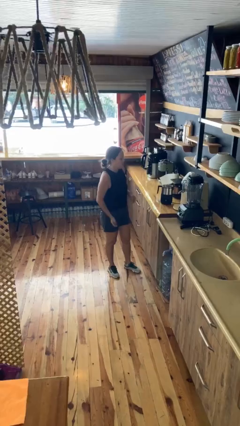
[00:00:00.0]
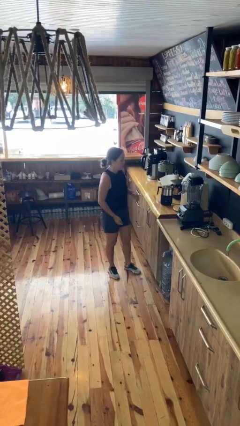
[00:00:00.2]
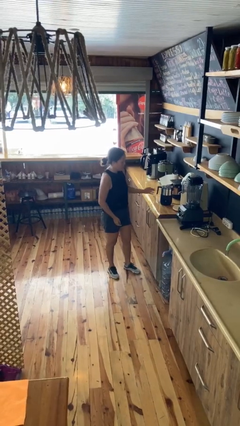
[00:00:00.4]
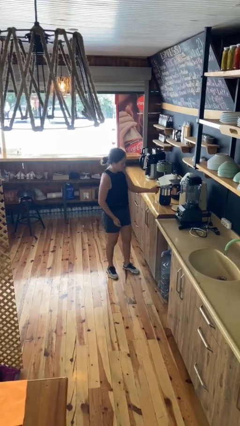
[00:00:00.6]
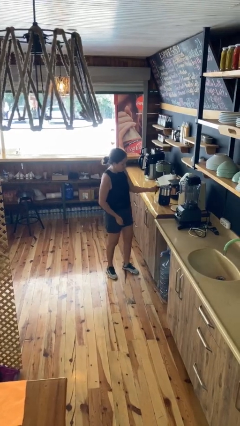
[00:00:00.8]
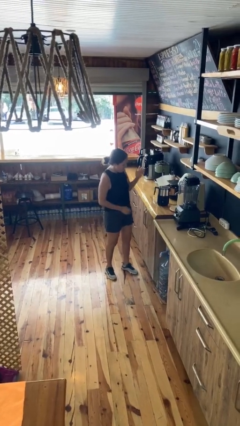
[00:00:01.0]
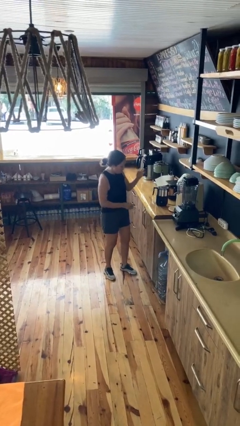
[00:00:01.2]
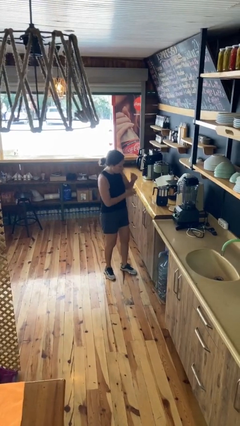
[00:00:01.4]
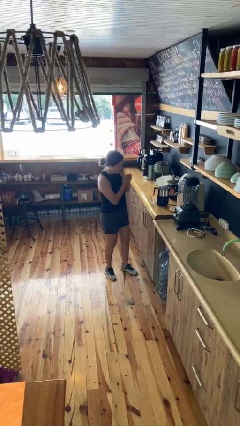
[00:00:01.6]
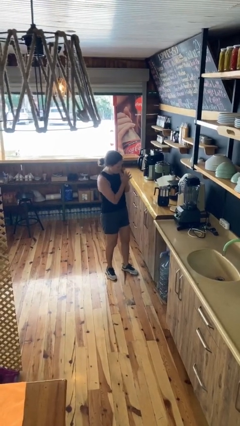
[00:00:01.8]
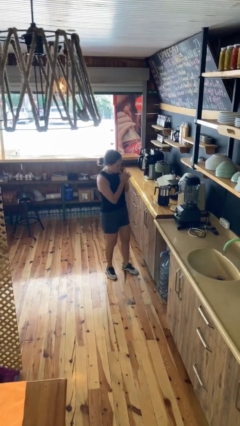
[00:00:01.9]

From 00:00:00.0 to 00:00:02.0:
person burns hand

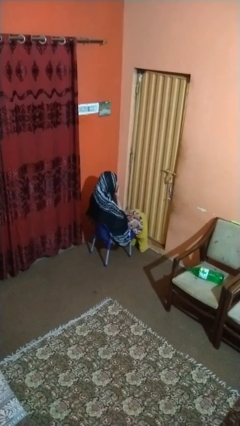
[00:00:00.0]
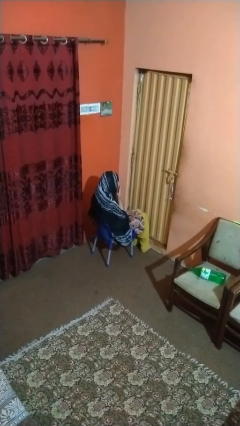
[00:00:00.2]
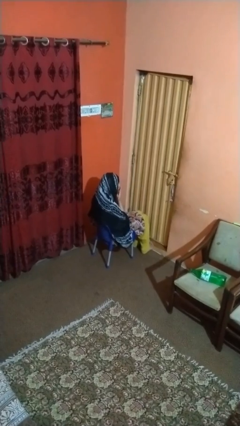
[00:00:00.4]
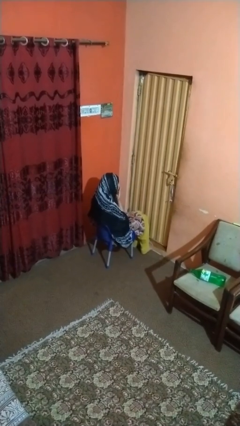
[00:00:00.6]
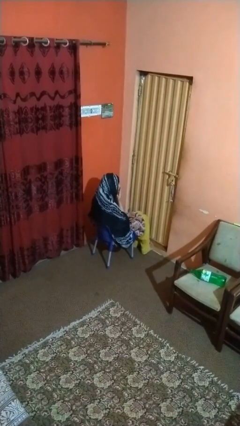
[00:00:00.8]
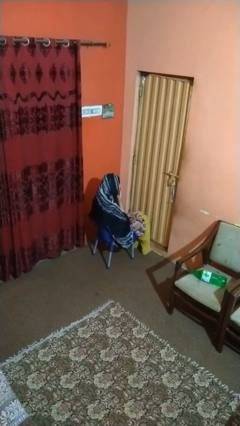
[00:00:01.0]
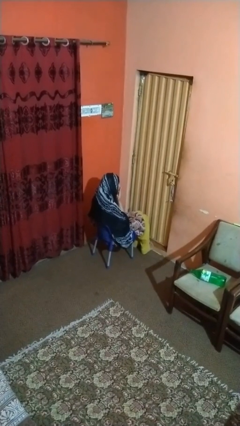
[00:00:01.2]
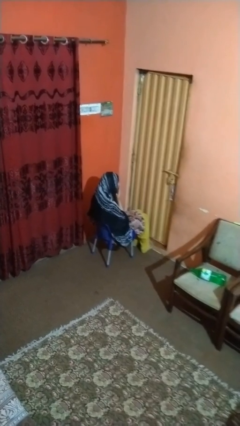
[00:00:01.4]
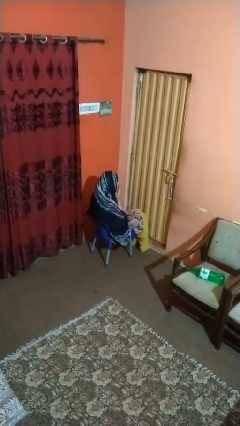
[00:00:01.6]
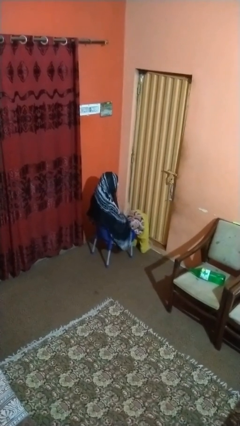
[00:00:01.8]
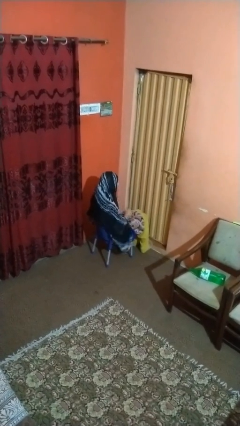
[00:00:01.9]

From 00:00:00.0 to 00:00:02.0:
person yawns

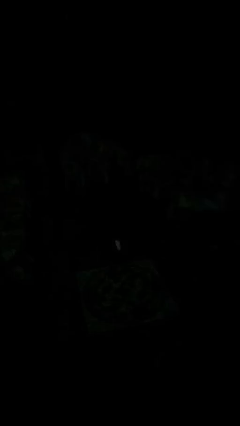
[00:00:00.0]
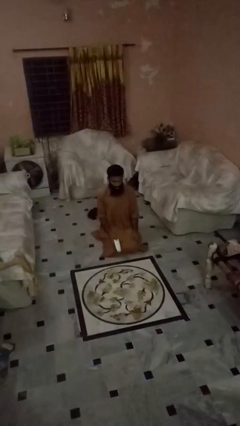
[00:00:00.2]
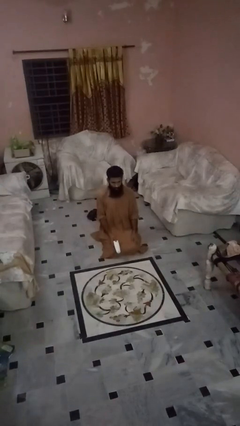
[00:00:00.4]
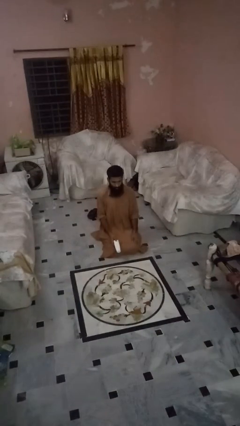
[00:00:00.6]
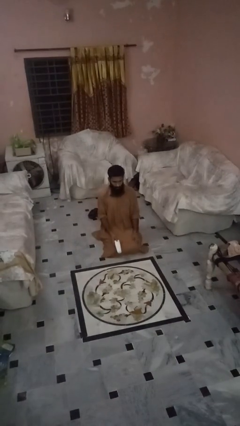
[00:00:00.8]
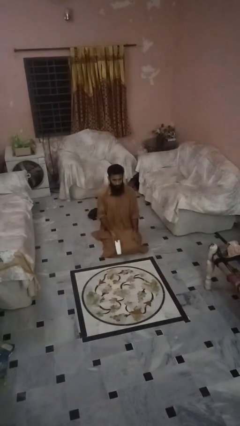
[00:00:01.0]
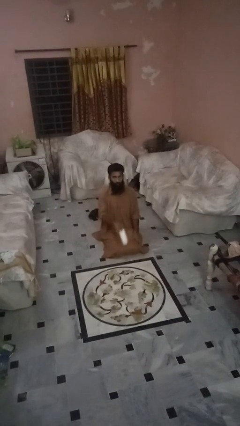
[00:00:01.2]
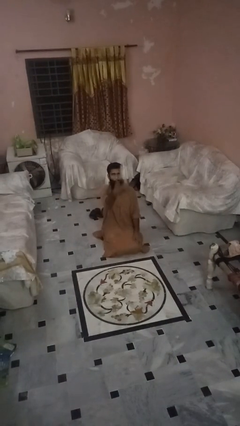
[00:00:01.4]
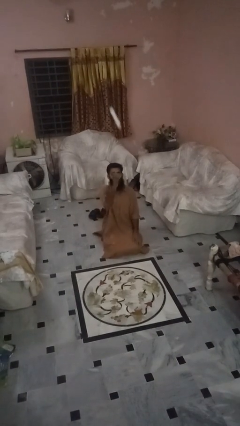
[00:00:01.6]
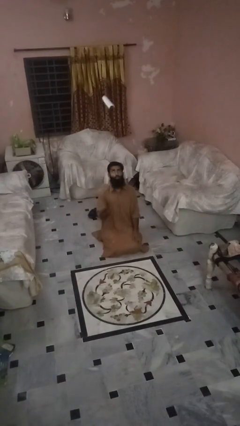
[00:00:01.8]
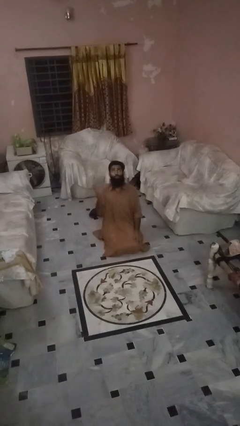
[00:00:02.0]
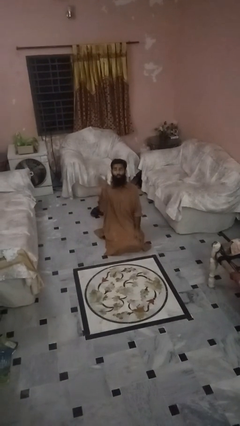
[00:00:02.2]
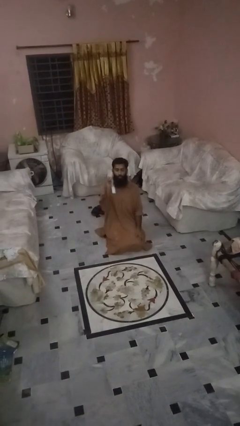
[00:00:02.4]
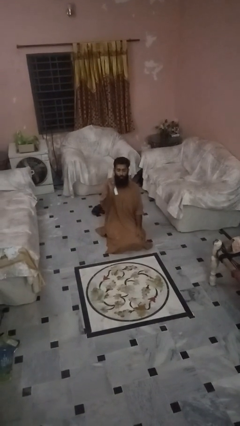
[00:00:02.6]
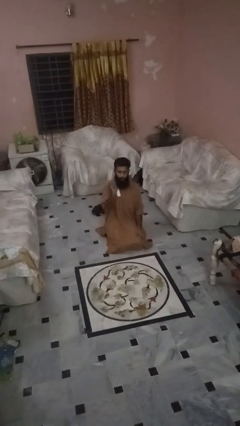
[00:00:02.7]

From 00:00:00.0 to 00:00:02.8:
person drops object

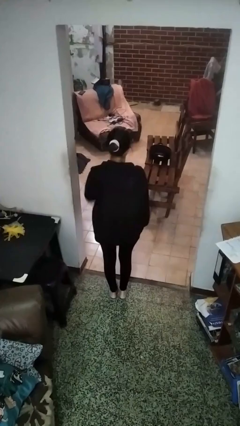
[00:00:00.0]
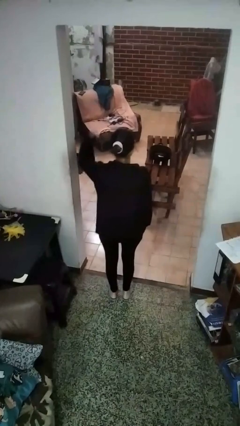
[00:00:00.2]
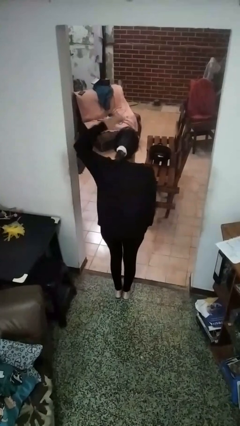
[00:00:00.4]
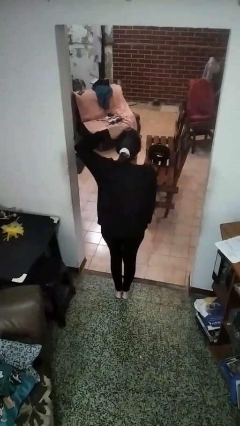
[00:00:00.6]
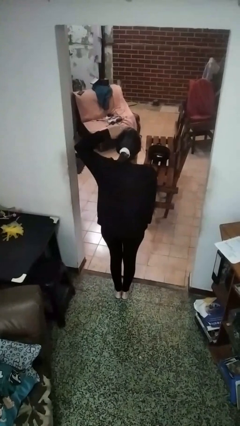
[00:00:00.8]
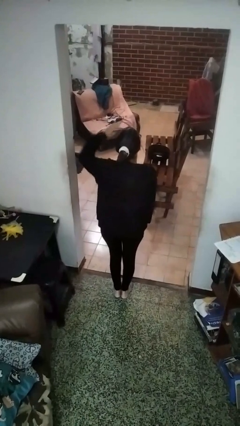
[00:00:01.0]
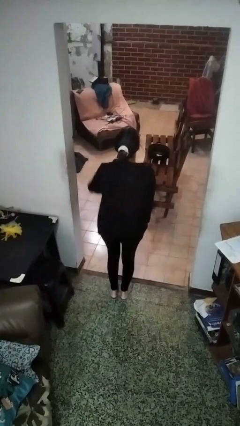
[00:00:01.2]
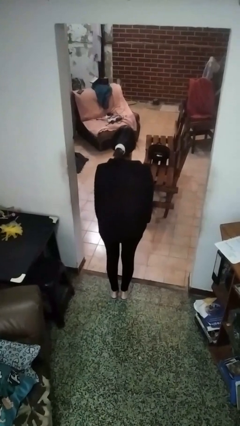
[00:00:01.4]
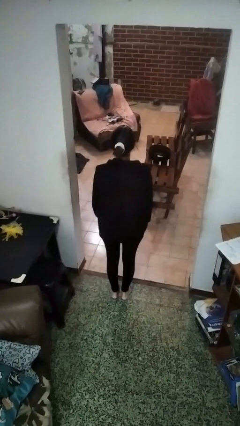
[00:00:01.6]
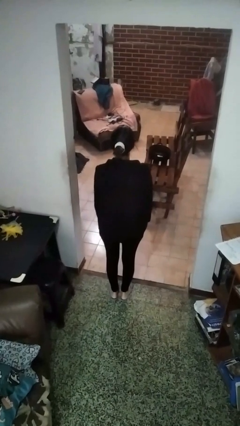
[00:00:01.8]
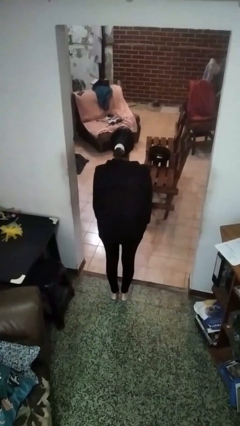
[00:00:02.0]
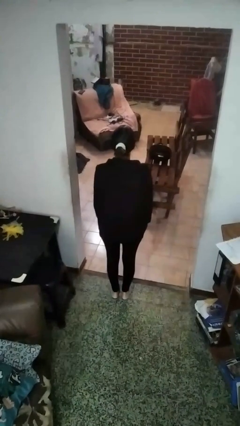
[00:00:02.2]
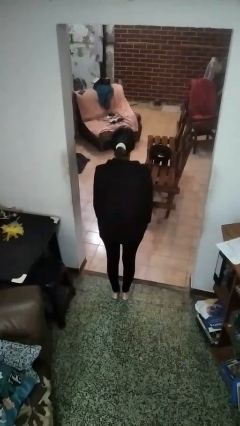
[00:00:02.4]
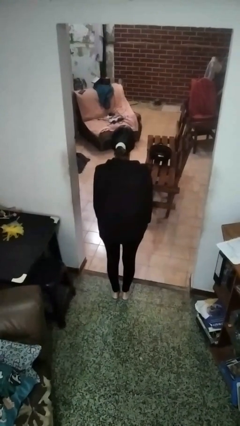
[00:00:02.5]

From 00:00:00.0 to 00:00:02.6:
person salutes

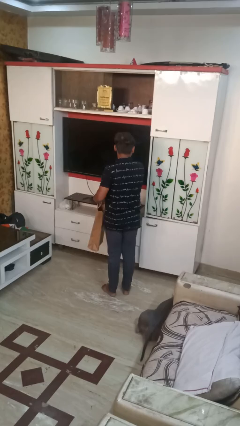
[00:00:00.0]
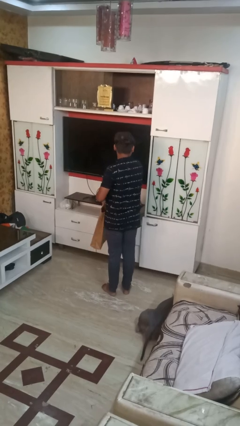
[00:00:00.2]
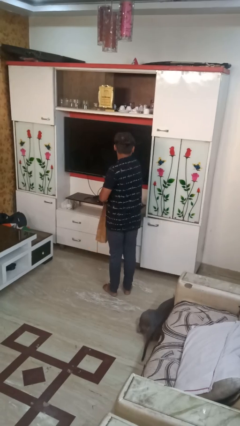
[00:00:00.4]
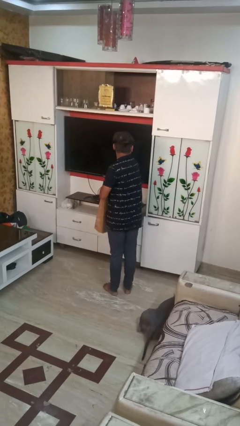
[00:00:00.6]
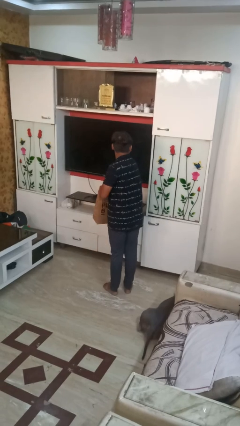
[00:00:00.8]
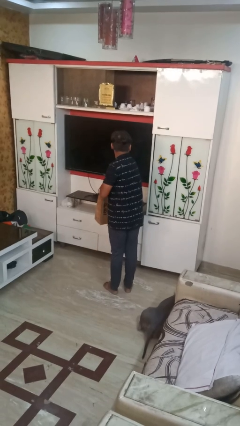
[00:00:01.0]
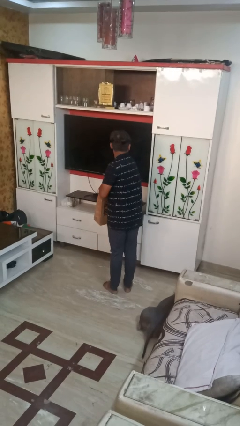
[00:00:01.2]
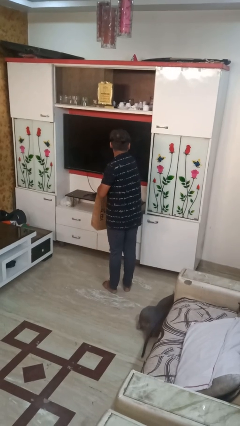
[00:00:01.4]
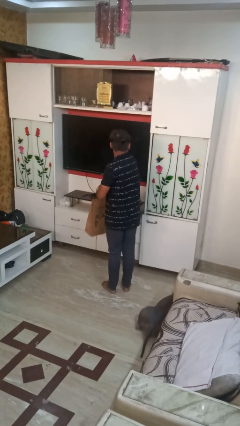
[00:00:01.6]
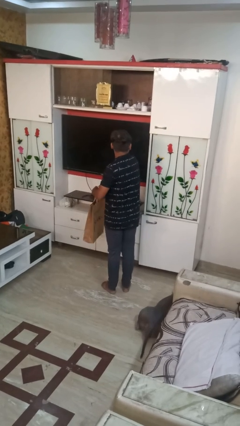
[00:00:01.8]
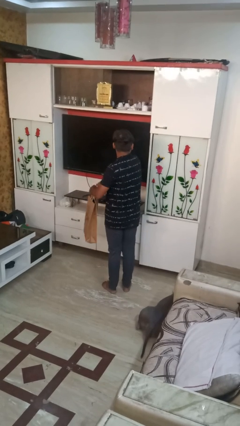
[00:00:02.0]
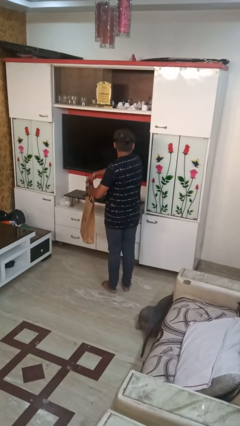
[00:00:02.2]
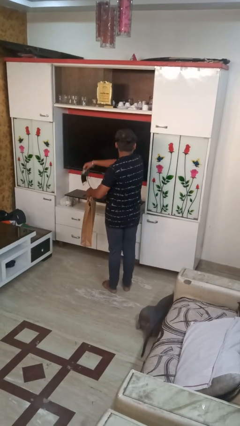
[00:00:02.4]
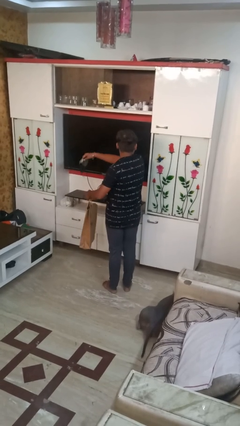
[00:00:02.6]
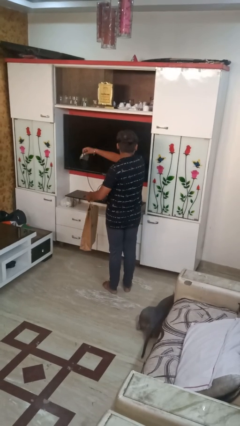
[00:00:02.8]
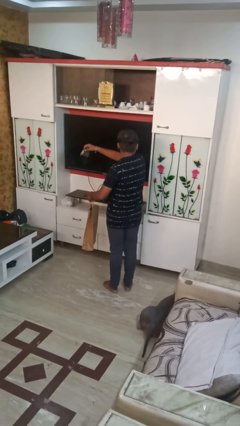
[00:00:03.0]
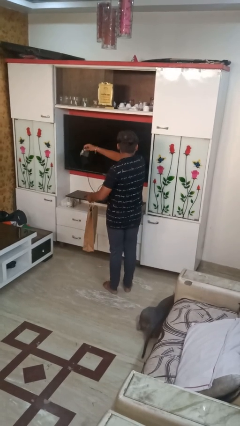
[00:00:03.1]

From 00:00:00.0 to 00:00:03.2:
person takes object from bag

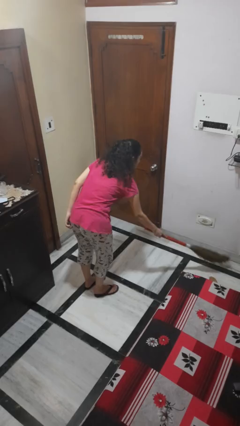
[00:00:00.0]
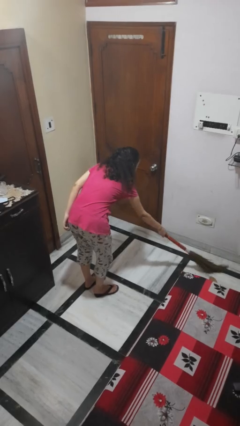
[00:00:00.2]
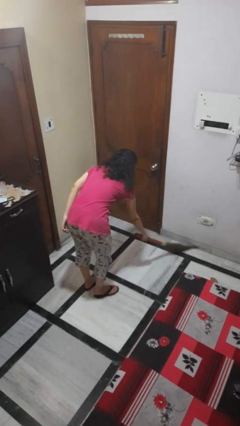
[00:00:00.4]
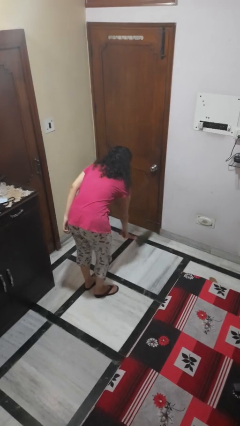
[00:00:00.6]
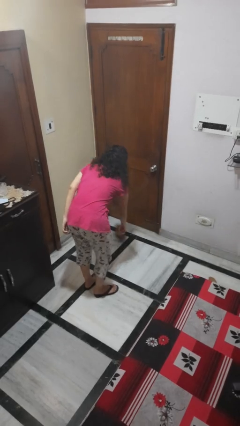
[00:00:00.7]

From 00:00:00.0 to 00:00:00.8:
person sweeps floor

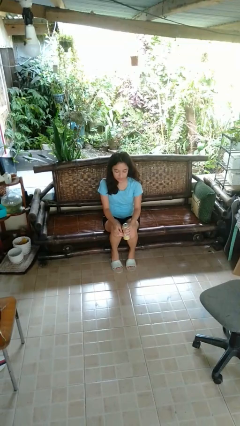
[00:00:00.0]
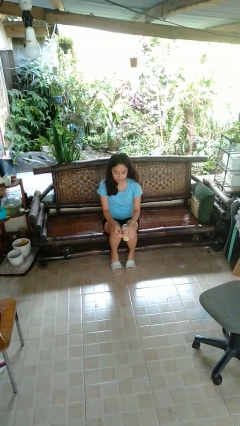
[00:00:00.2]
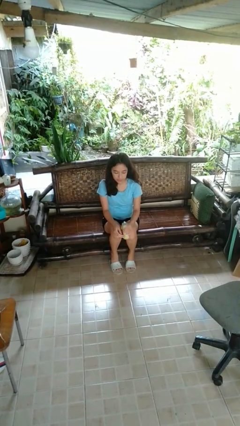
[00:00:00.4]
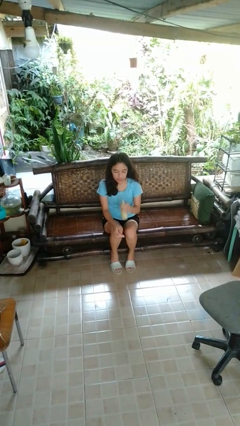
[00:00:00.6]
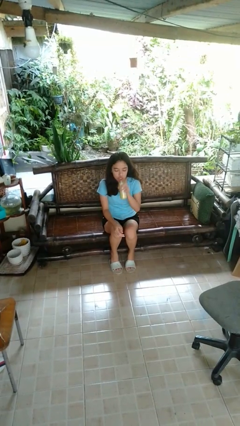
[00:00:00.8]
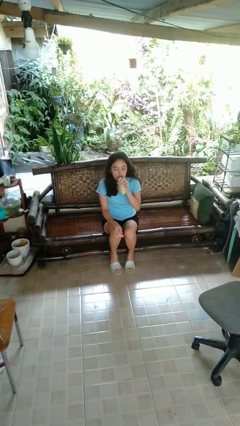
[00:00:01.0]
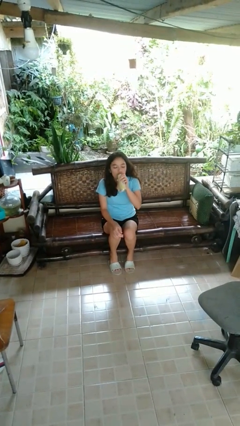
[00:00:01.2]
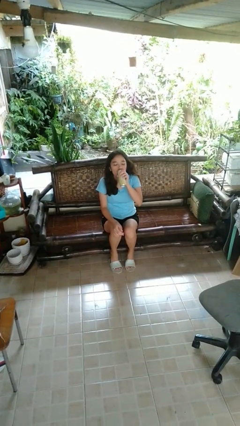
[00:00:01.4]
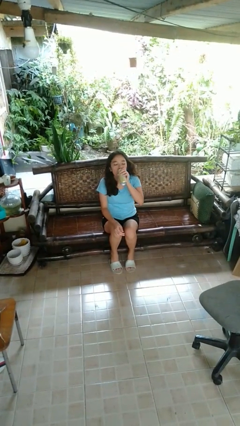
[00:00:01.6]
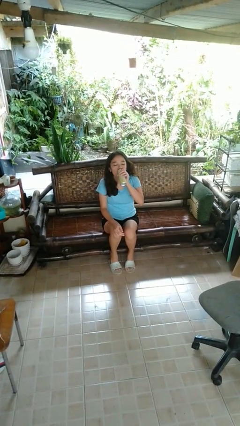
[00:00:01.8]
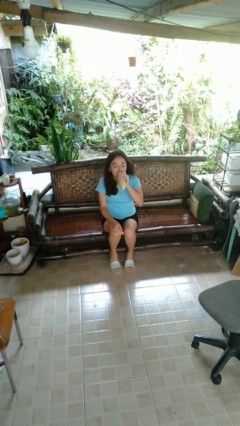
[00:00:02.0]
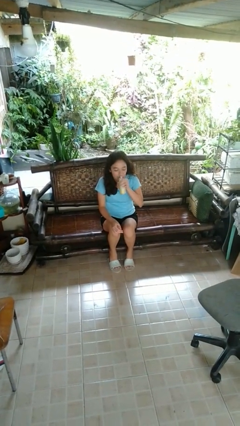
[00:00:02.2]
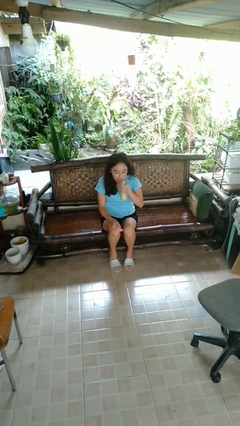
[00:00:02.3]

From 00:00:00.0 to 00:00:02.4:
person drinks from beverage can

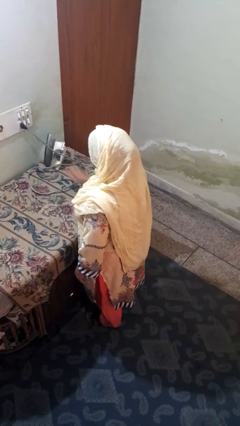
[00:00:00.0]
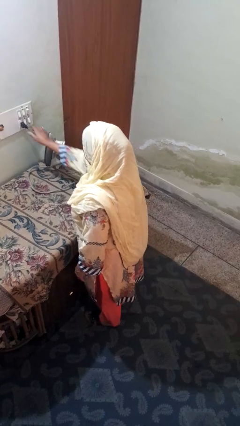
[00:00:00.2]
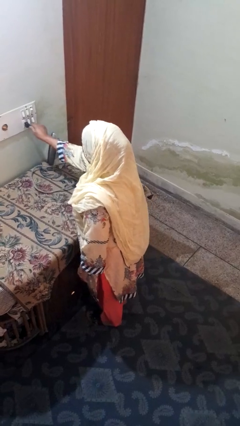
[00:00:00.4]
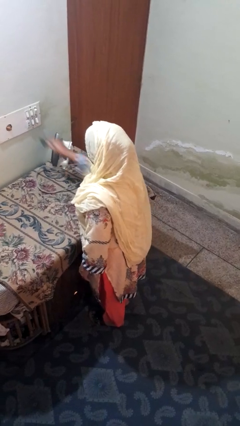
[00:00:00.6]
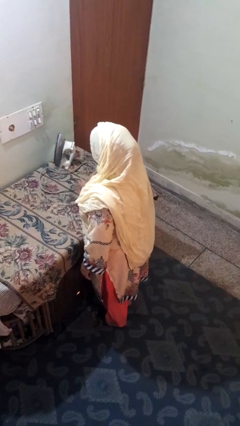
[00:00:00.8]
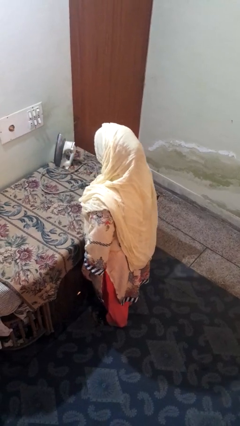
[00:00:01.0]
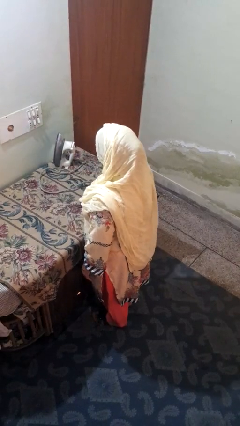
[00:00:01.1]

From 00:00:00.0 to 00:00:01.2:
person unplugs from electrical socket
